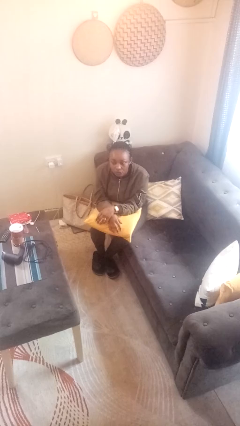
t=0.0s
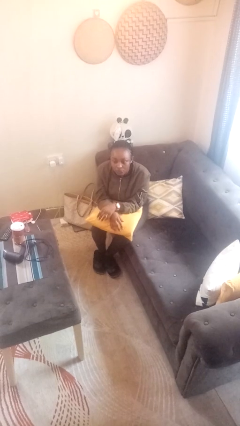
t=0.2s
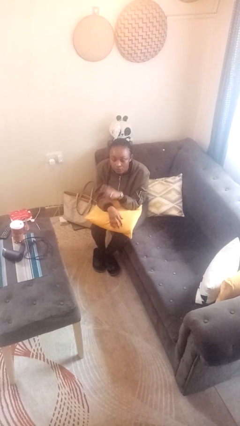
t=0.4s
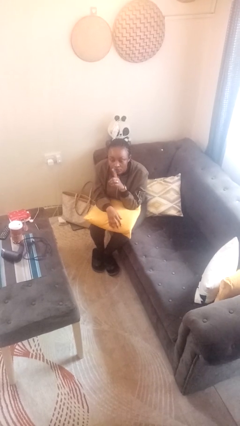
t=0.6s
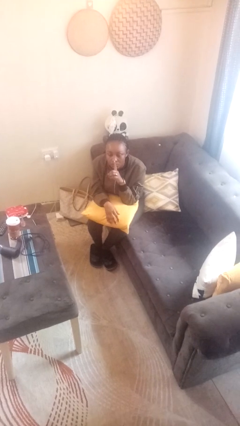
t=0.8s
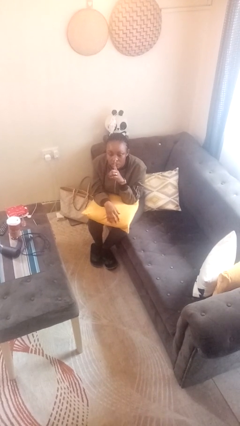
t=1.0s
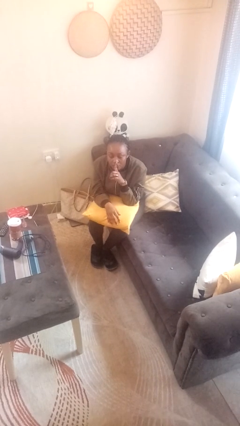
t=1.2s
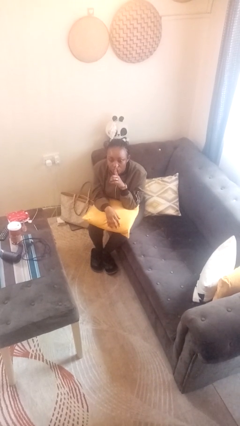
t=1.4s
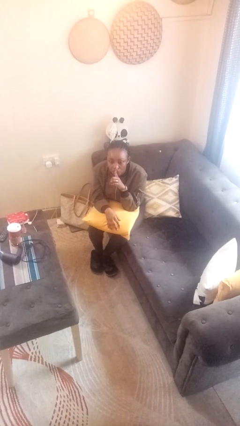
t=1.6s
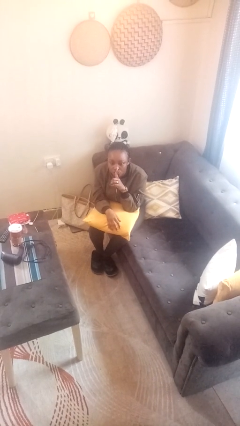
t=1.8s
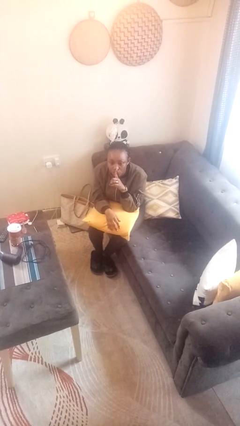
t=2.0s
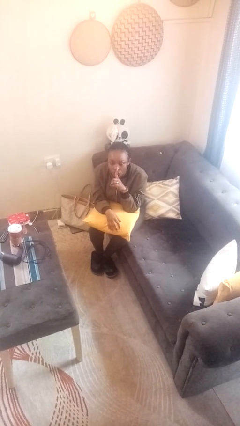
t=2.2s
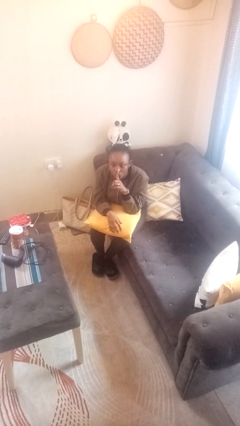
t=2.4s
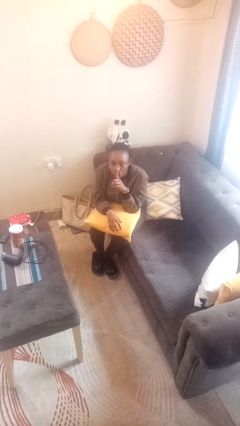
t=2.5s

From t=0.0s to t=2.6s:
person gestures be quiet

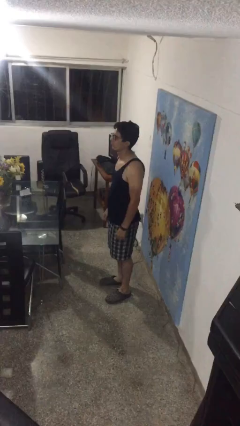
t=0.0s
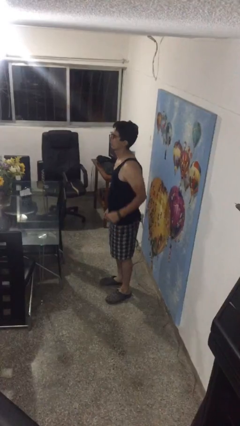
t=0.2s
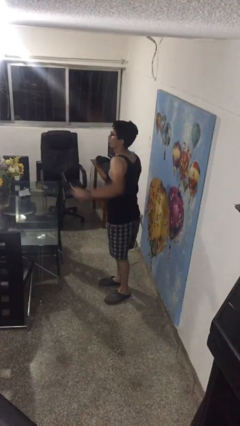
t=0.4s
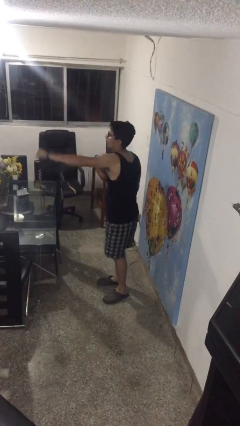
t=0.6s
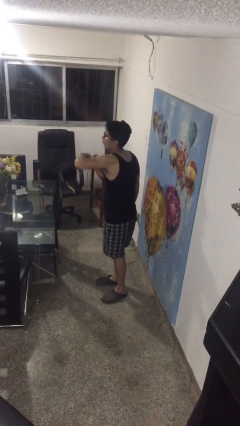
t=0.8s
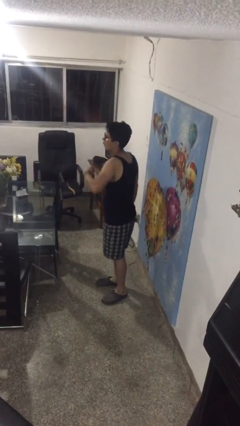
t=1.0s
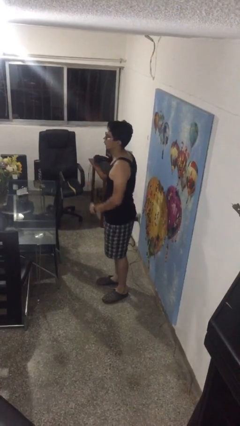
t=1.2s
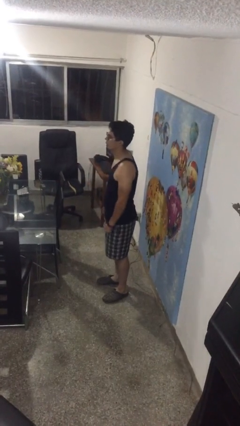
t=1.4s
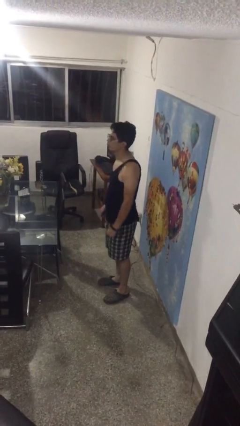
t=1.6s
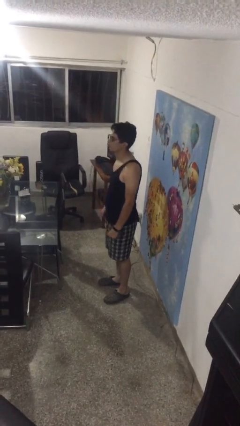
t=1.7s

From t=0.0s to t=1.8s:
person punches

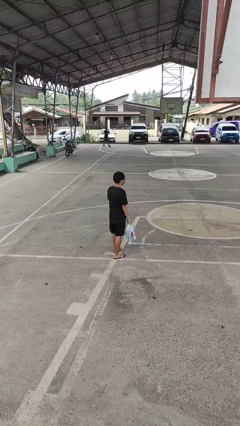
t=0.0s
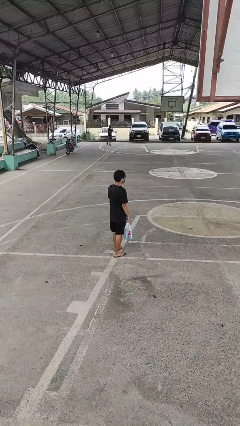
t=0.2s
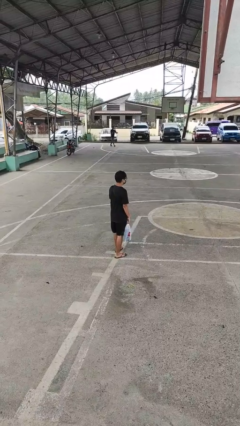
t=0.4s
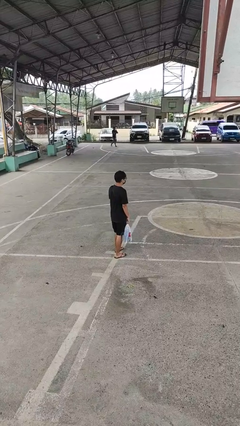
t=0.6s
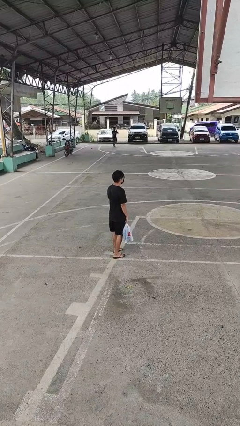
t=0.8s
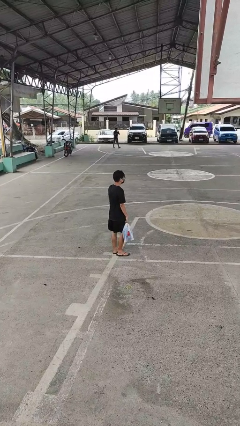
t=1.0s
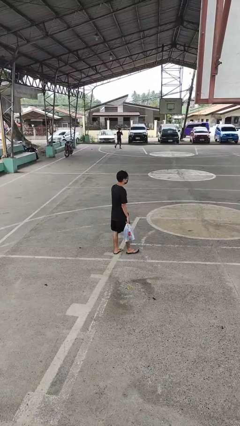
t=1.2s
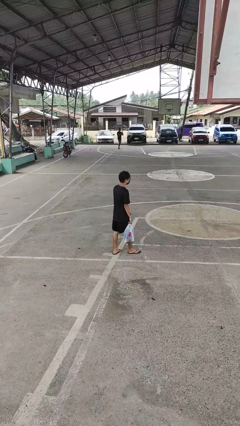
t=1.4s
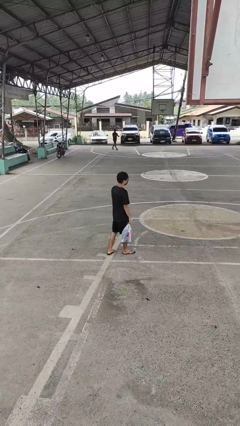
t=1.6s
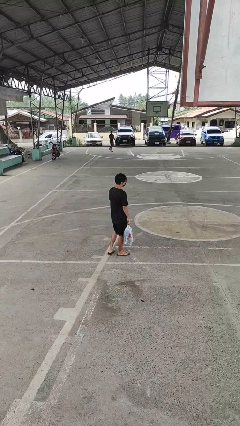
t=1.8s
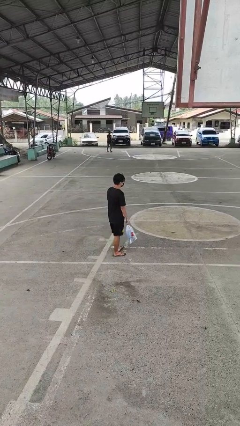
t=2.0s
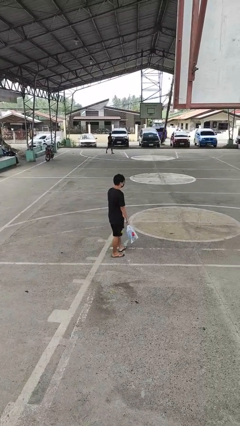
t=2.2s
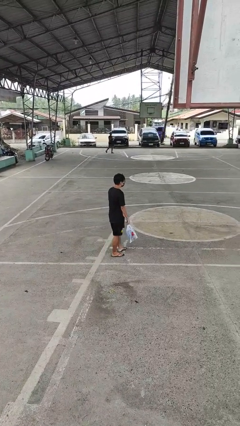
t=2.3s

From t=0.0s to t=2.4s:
person carries groceries

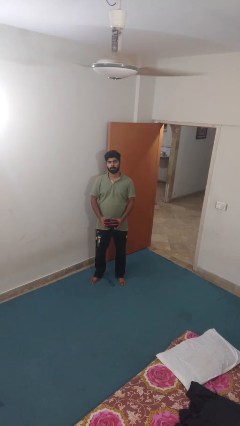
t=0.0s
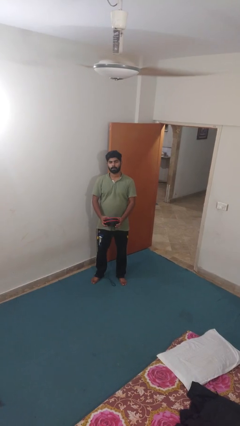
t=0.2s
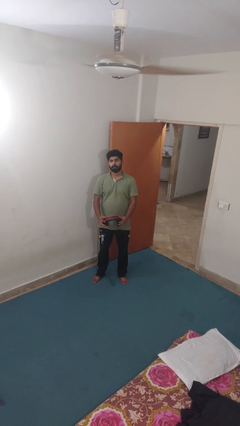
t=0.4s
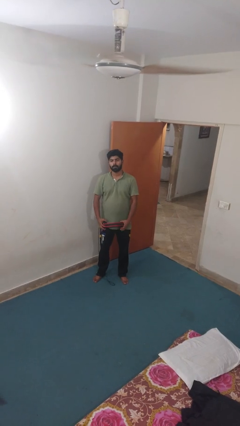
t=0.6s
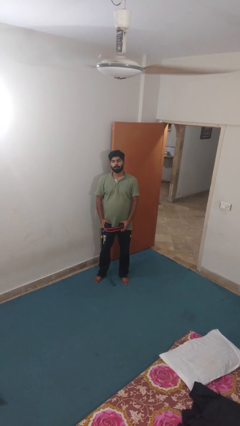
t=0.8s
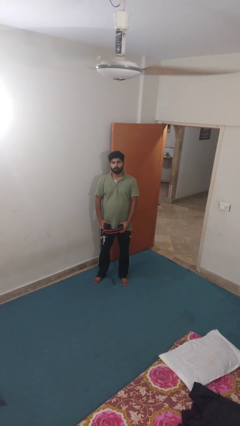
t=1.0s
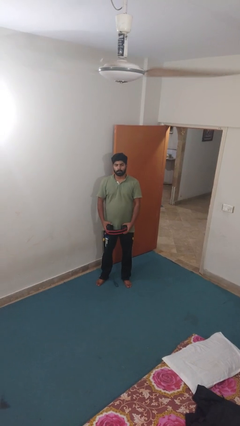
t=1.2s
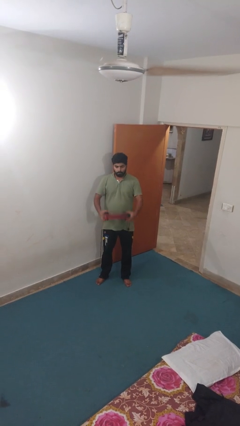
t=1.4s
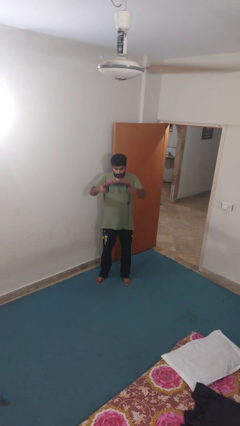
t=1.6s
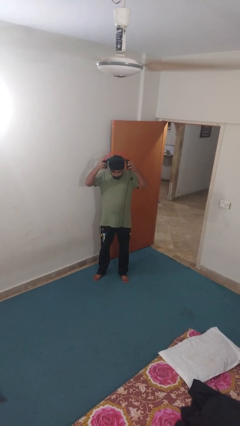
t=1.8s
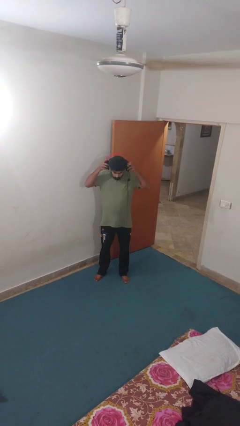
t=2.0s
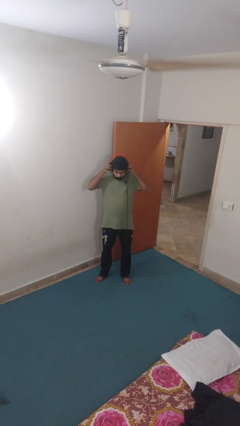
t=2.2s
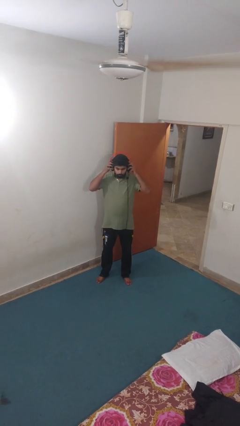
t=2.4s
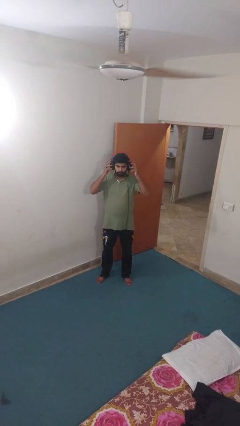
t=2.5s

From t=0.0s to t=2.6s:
person puts on headphones

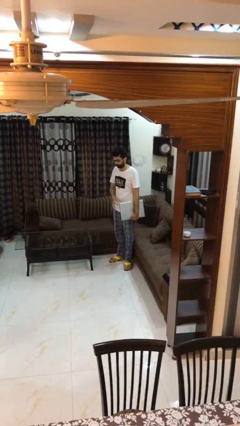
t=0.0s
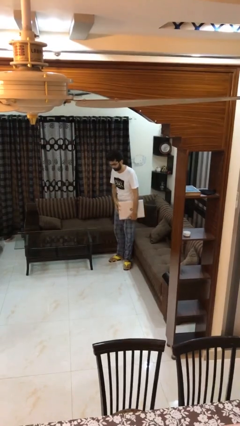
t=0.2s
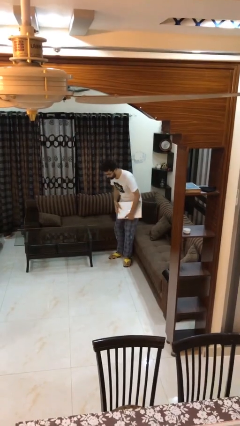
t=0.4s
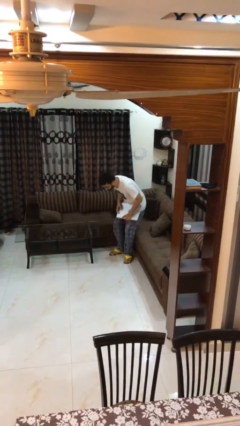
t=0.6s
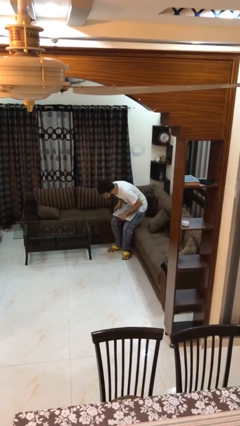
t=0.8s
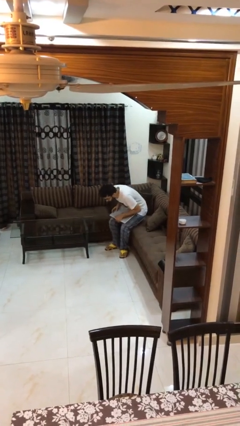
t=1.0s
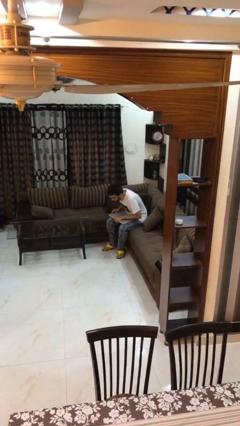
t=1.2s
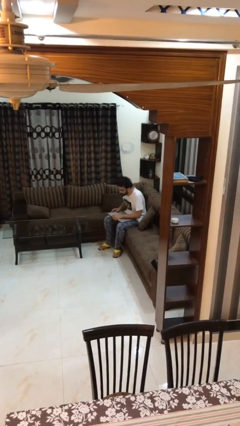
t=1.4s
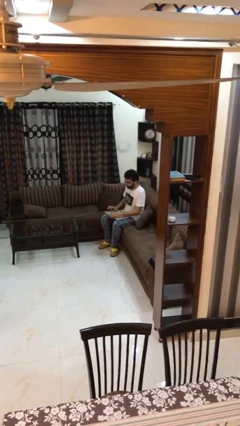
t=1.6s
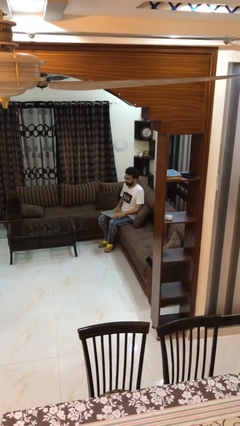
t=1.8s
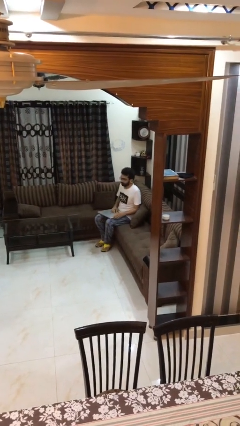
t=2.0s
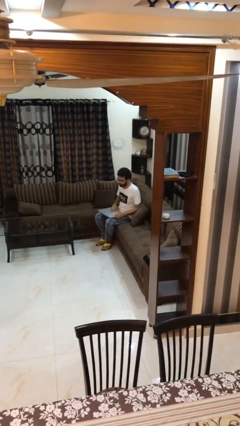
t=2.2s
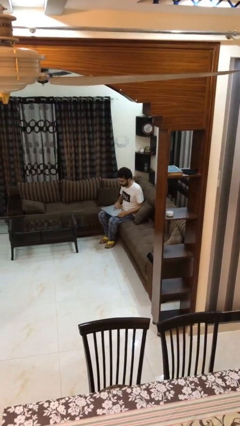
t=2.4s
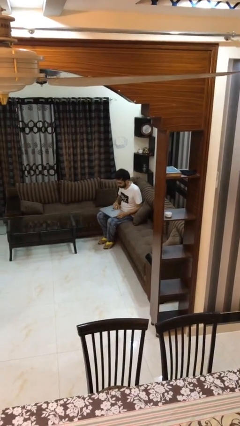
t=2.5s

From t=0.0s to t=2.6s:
person sits down

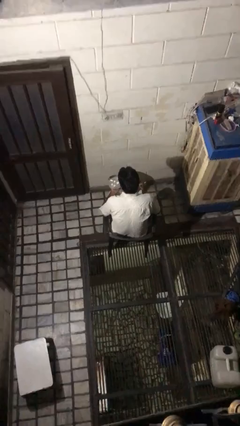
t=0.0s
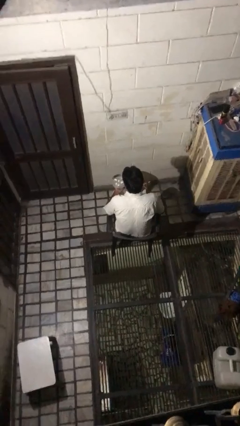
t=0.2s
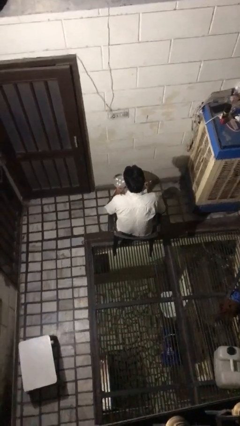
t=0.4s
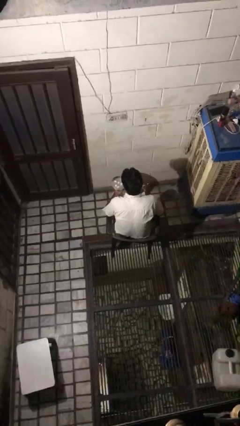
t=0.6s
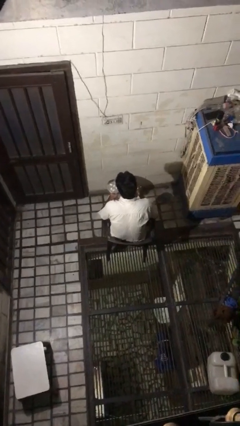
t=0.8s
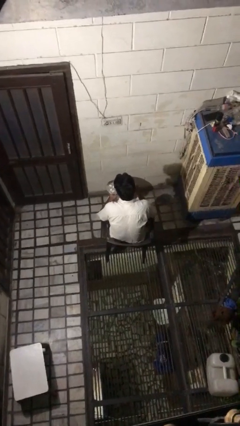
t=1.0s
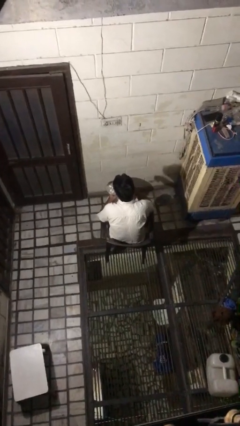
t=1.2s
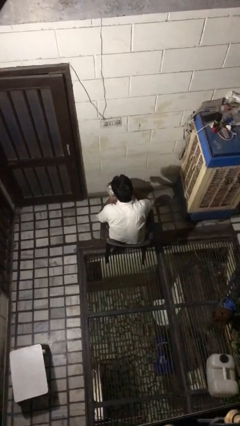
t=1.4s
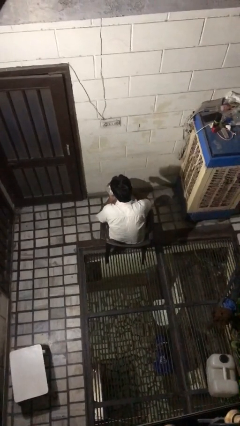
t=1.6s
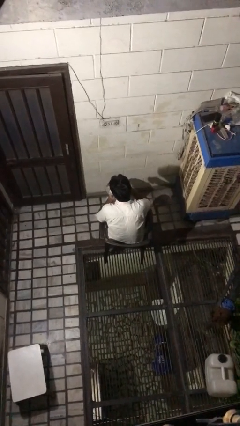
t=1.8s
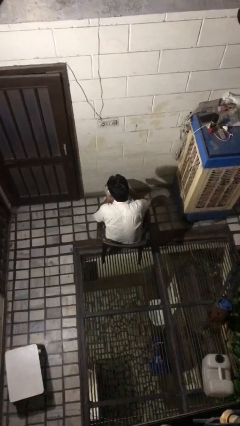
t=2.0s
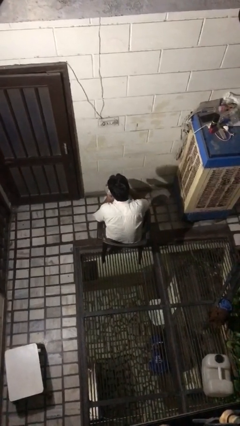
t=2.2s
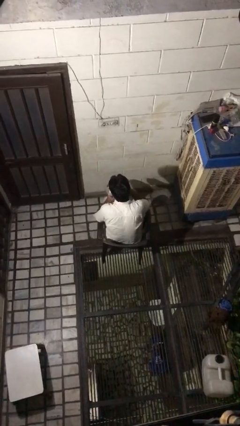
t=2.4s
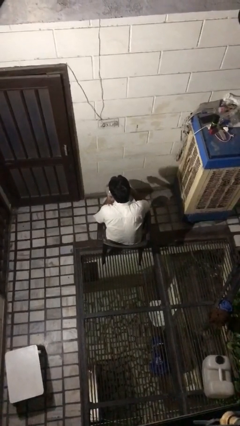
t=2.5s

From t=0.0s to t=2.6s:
person eats with utensil

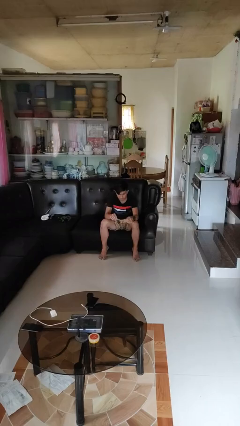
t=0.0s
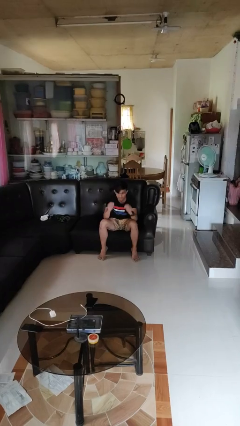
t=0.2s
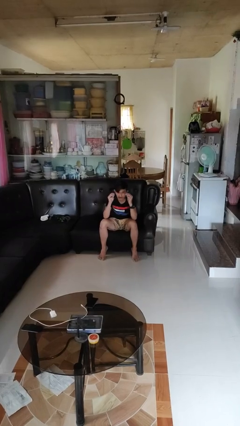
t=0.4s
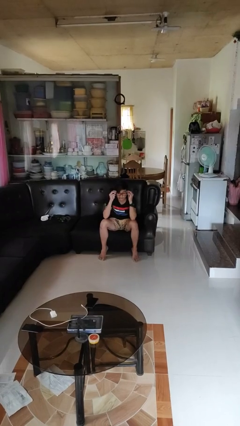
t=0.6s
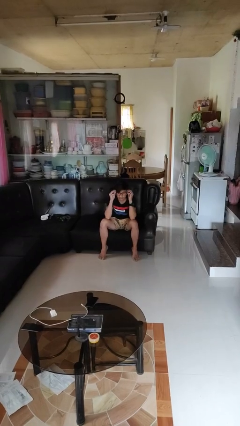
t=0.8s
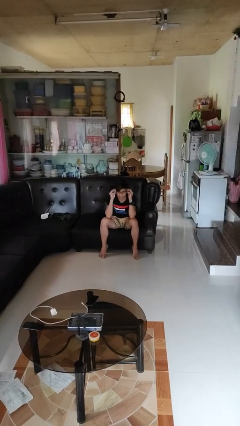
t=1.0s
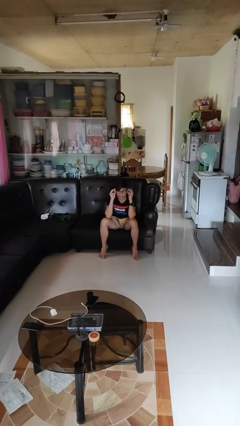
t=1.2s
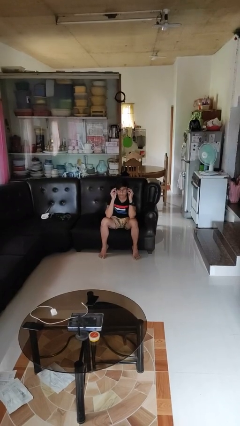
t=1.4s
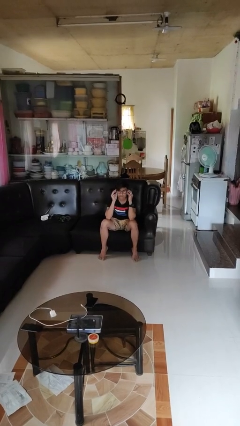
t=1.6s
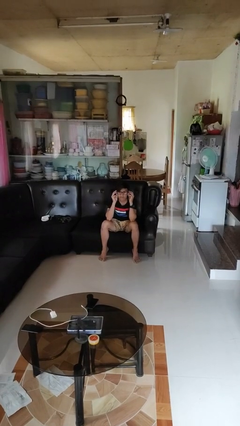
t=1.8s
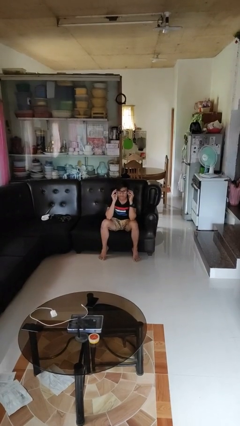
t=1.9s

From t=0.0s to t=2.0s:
person puts on glasses

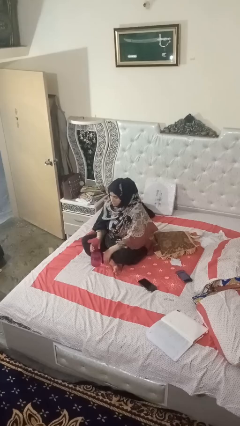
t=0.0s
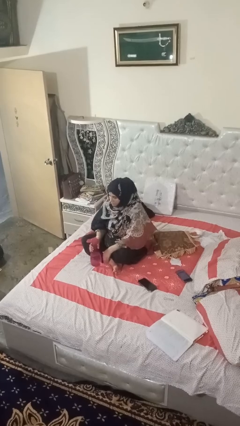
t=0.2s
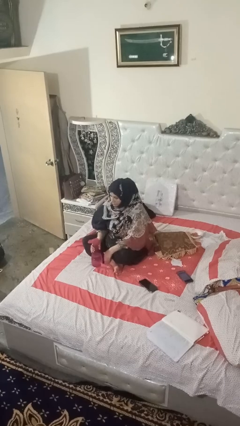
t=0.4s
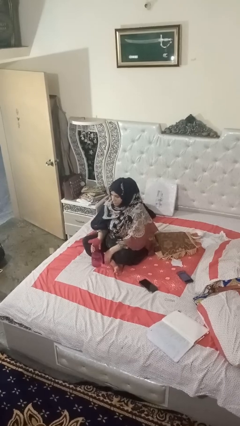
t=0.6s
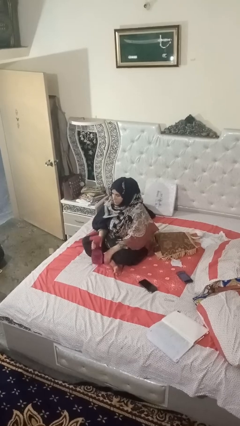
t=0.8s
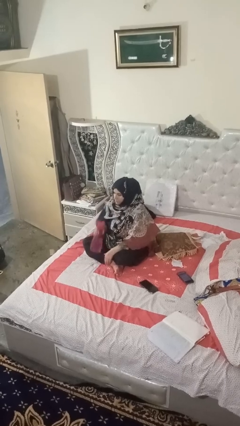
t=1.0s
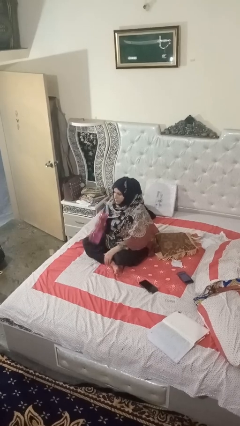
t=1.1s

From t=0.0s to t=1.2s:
person drinks from bottle
